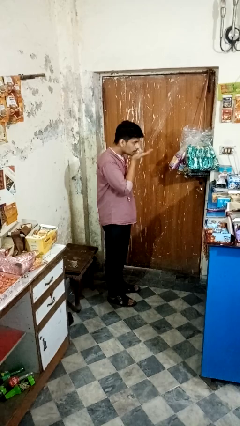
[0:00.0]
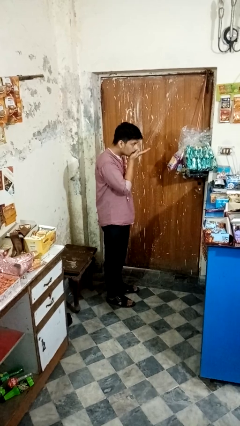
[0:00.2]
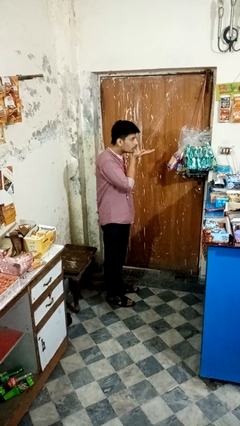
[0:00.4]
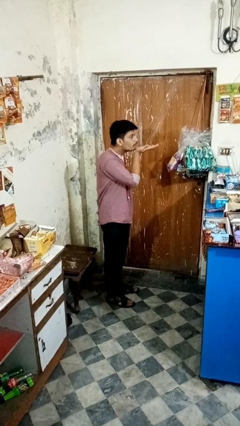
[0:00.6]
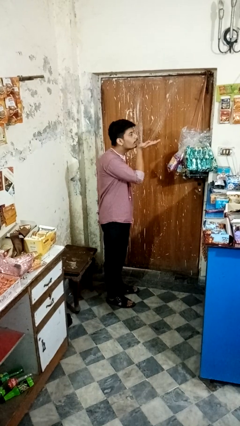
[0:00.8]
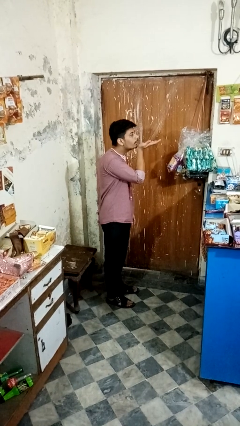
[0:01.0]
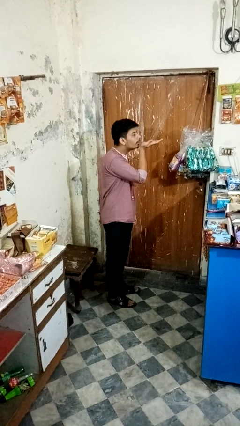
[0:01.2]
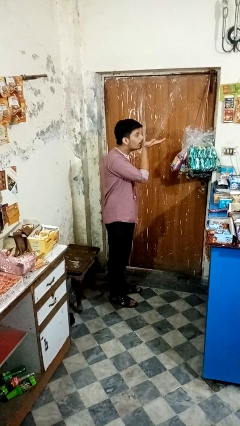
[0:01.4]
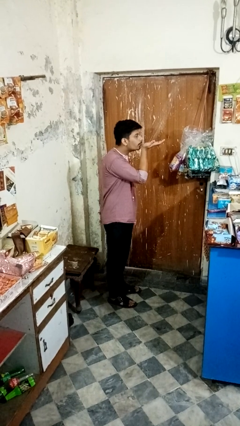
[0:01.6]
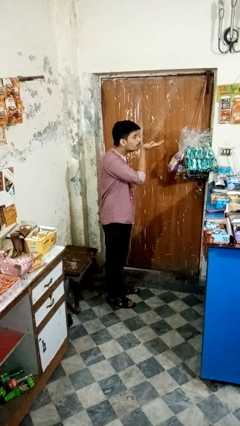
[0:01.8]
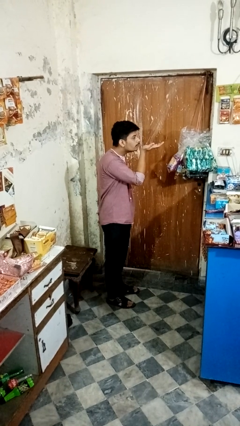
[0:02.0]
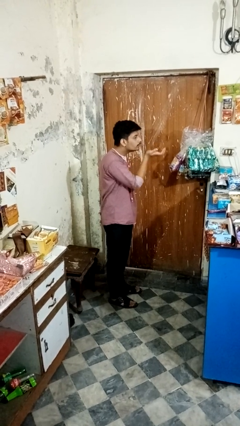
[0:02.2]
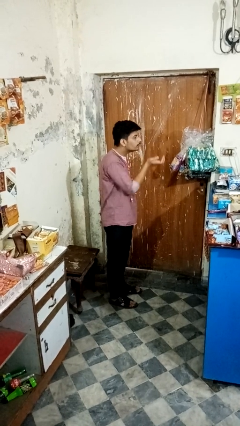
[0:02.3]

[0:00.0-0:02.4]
person gestures blow kiss

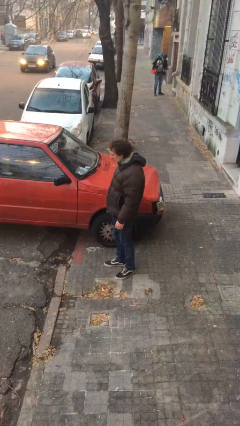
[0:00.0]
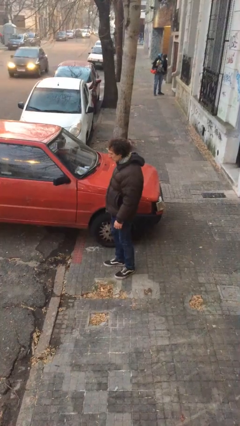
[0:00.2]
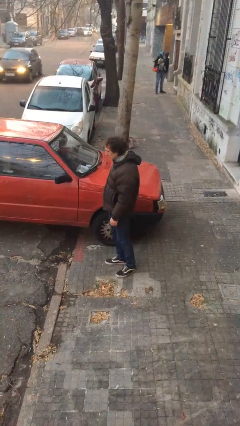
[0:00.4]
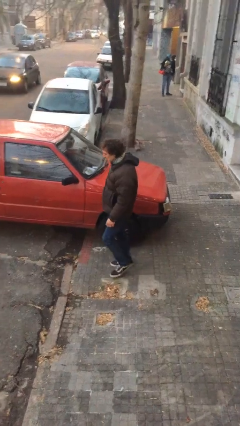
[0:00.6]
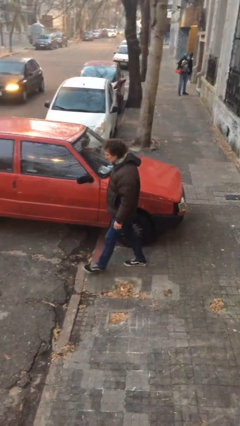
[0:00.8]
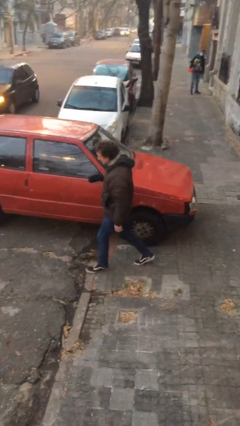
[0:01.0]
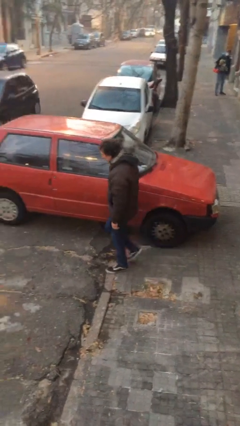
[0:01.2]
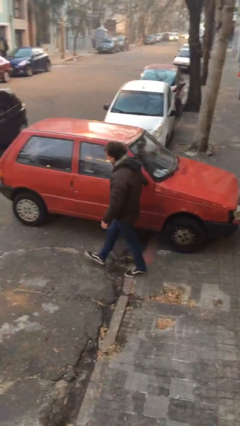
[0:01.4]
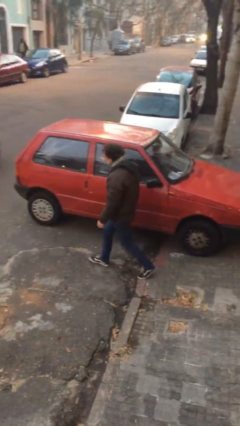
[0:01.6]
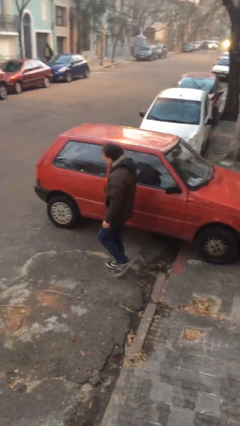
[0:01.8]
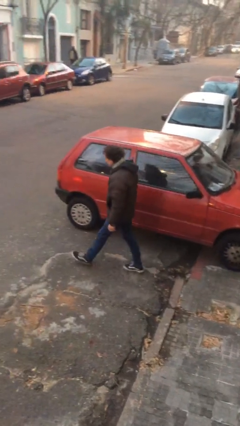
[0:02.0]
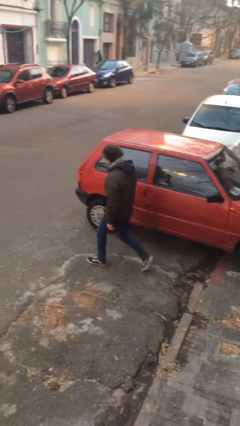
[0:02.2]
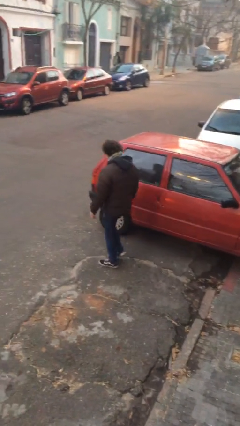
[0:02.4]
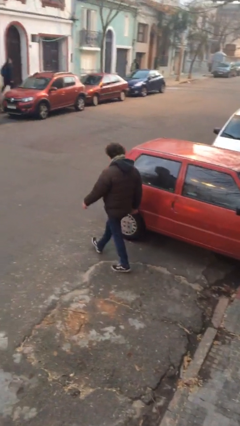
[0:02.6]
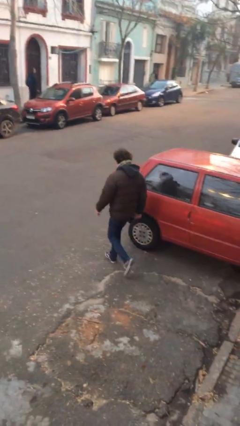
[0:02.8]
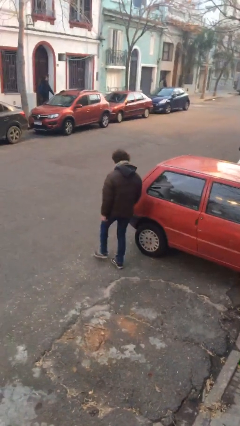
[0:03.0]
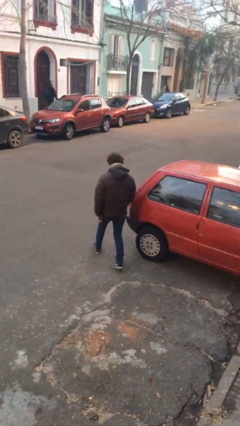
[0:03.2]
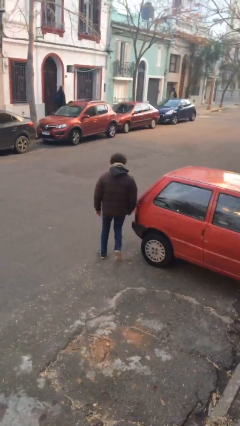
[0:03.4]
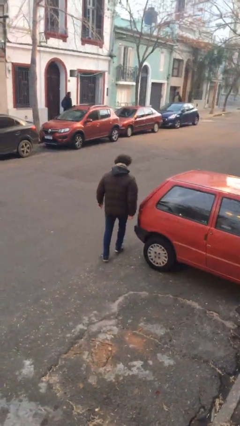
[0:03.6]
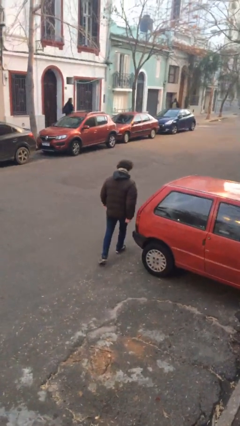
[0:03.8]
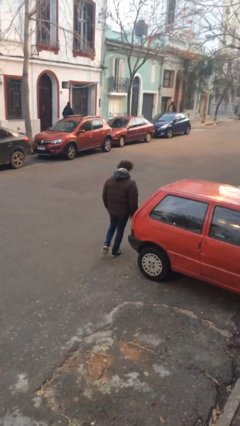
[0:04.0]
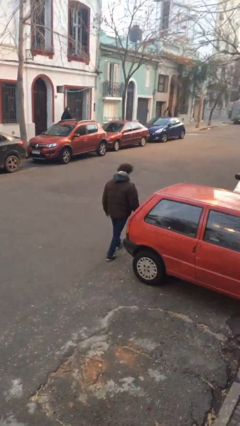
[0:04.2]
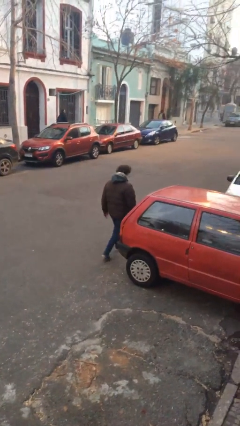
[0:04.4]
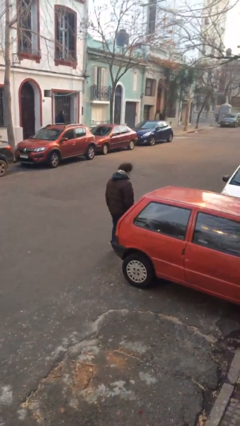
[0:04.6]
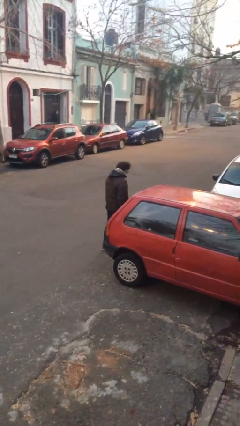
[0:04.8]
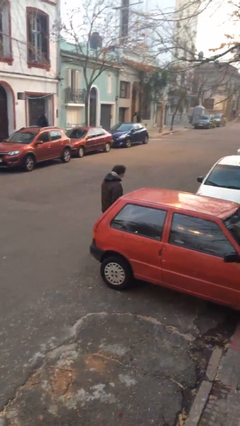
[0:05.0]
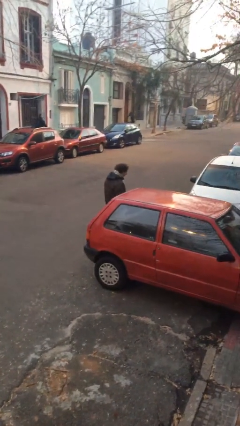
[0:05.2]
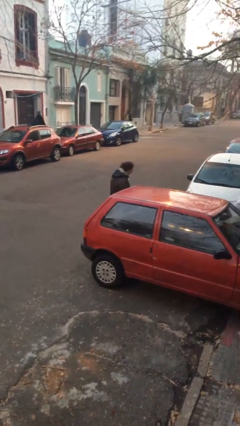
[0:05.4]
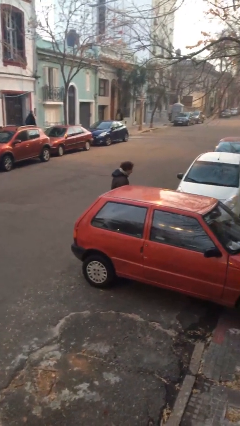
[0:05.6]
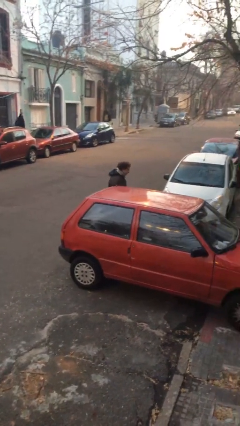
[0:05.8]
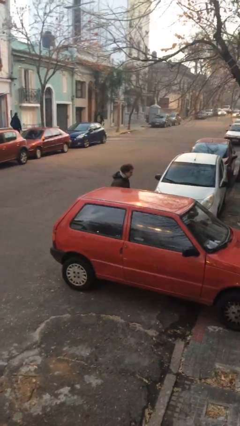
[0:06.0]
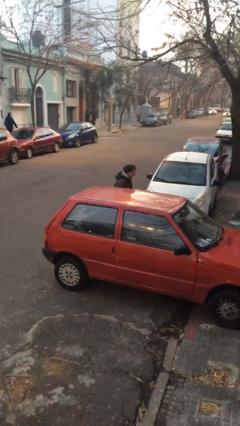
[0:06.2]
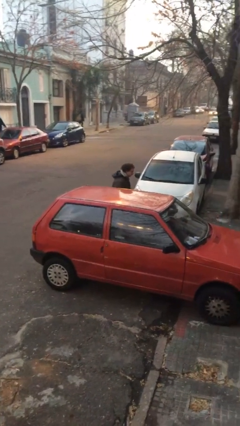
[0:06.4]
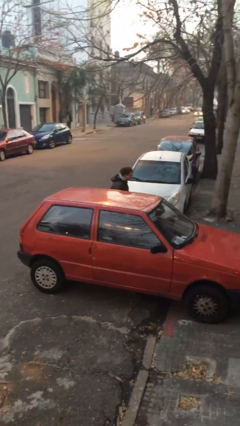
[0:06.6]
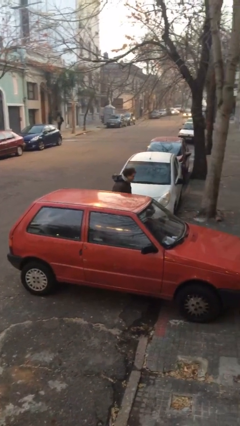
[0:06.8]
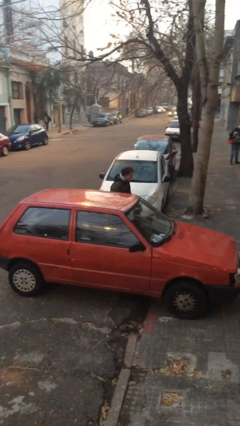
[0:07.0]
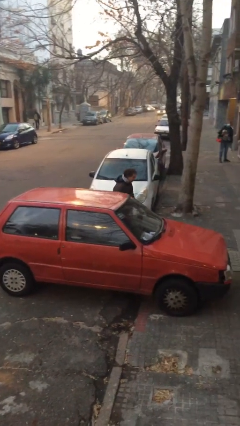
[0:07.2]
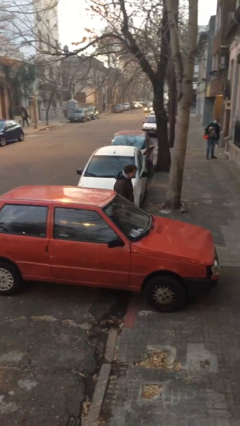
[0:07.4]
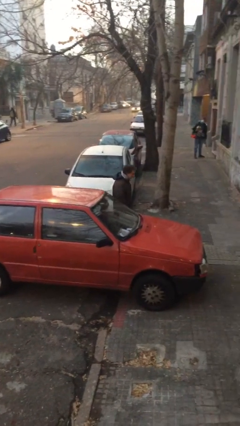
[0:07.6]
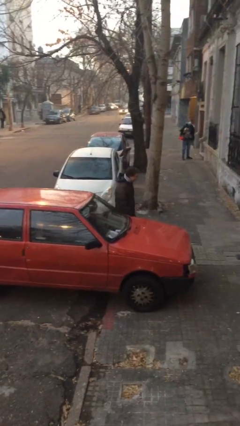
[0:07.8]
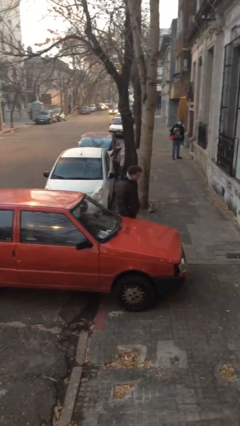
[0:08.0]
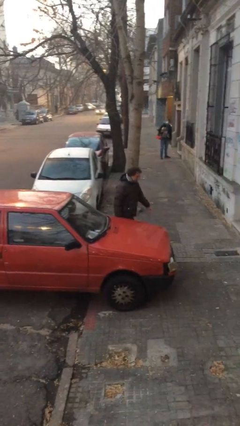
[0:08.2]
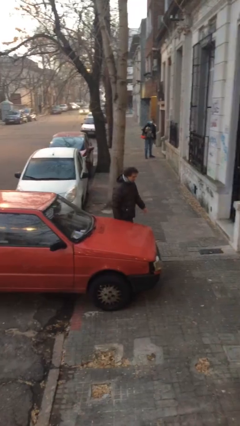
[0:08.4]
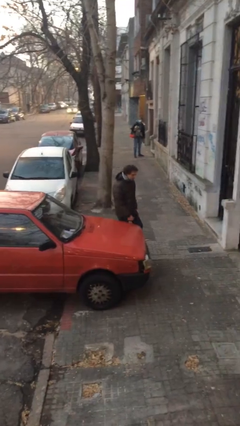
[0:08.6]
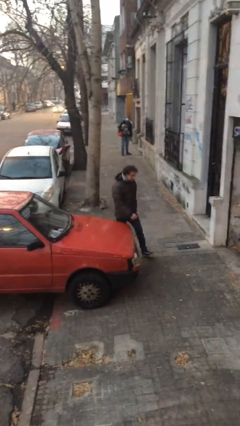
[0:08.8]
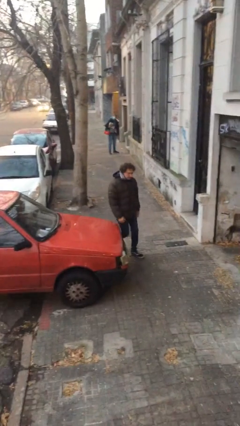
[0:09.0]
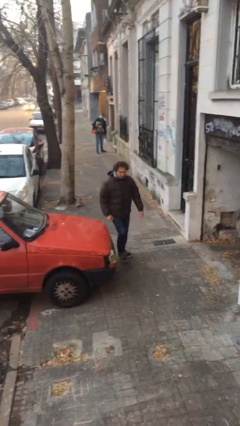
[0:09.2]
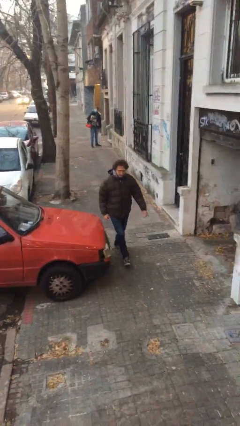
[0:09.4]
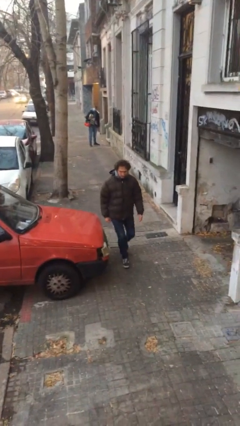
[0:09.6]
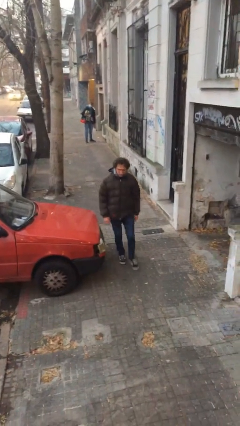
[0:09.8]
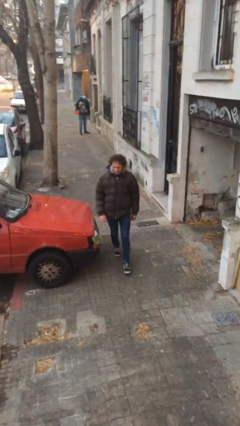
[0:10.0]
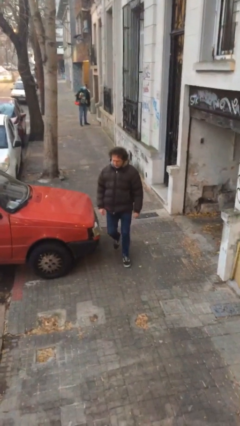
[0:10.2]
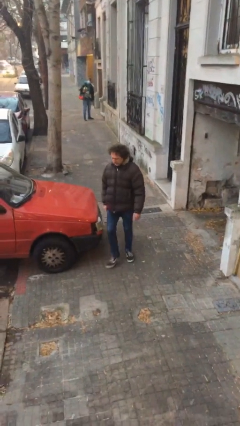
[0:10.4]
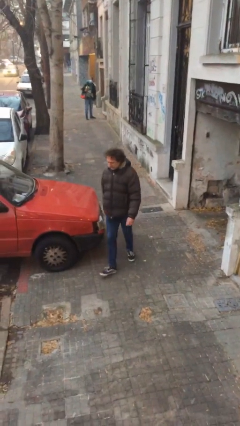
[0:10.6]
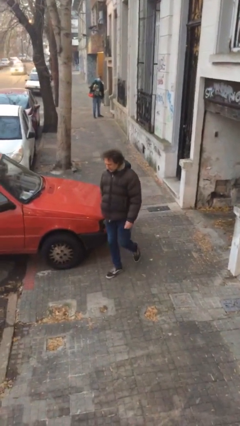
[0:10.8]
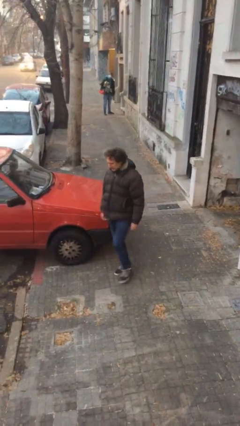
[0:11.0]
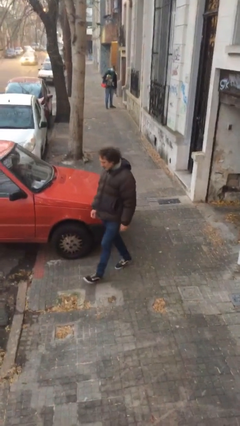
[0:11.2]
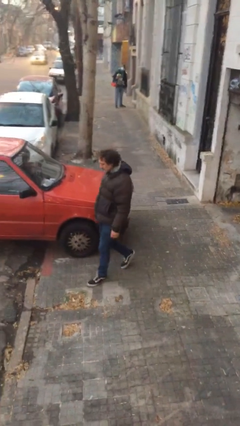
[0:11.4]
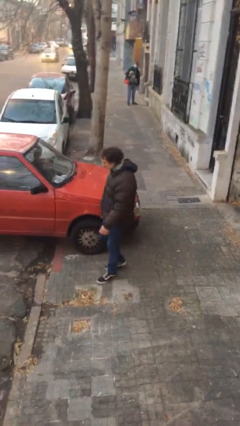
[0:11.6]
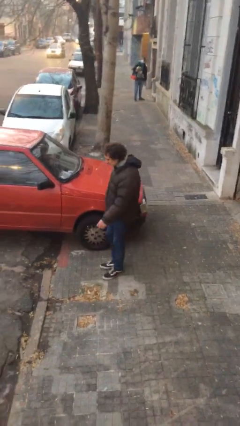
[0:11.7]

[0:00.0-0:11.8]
person walks around car

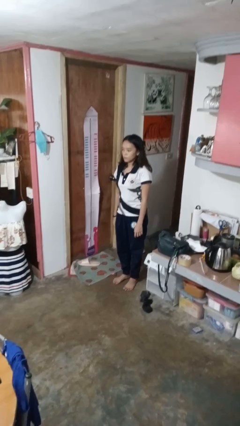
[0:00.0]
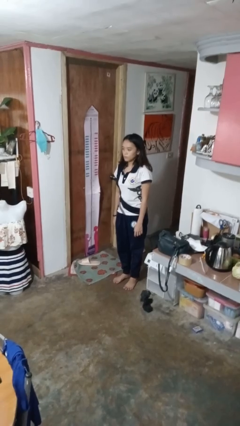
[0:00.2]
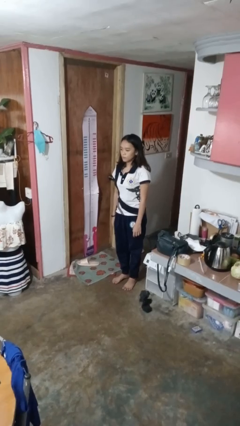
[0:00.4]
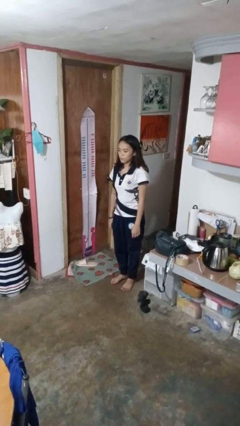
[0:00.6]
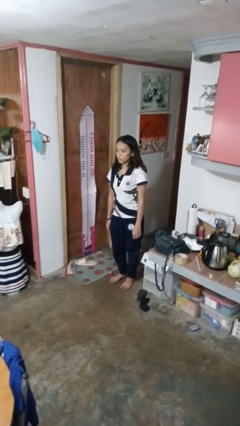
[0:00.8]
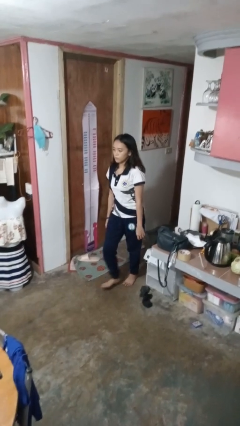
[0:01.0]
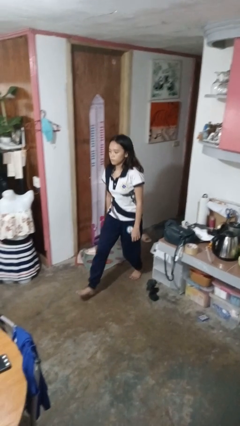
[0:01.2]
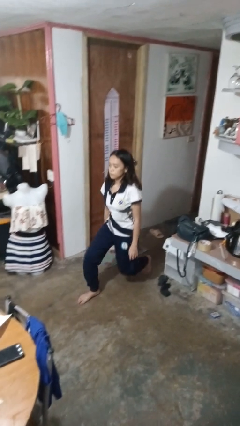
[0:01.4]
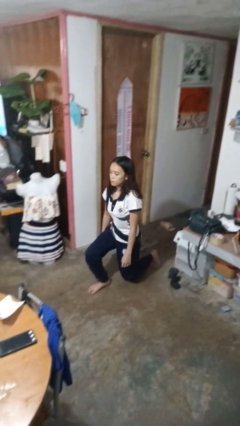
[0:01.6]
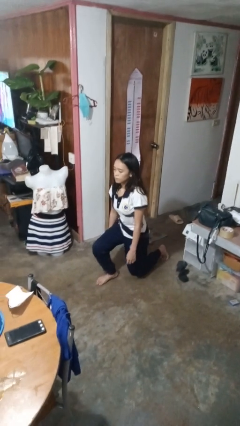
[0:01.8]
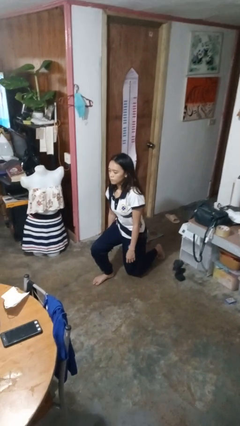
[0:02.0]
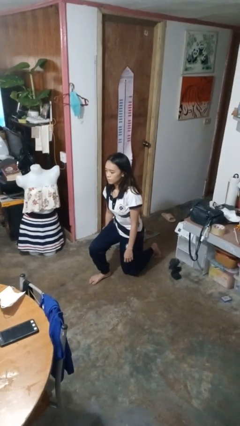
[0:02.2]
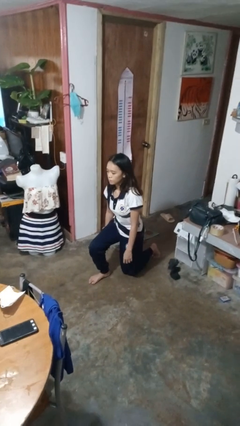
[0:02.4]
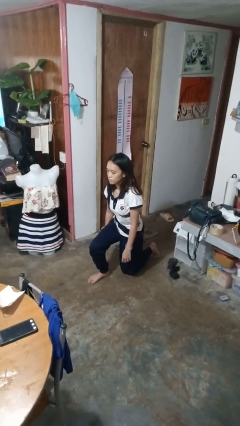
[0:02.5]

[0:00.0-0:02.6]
person kneels

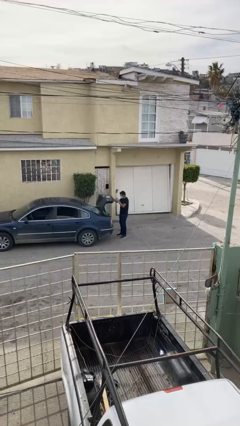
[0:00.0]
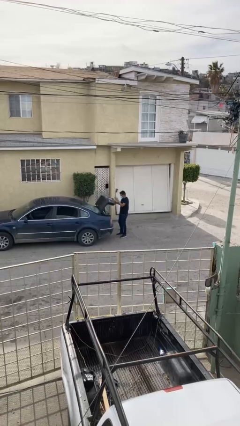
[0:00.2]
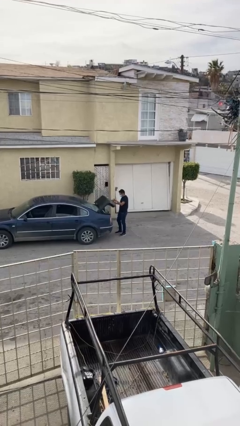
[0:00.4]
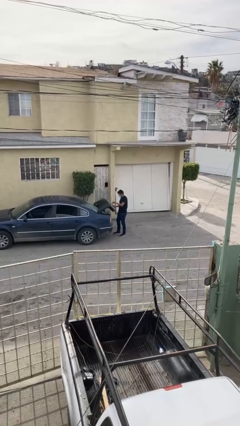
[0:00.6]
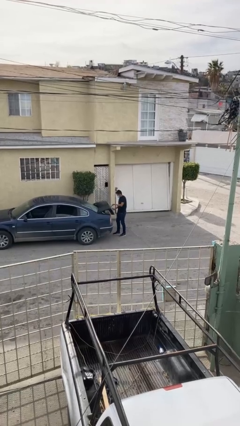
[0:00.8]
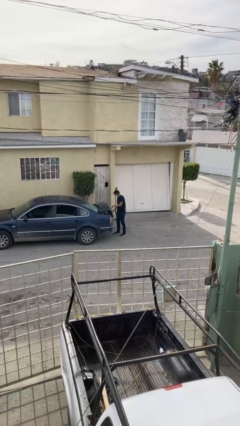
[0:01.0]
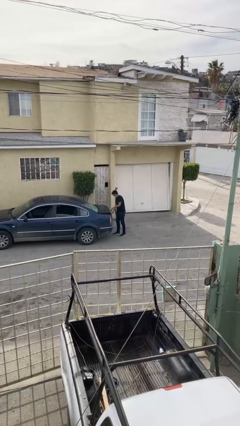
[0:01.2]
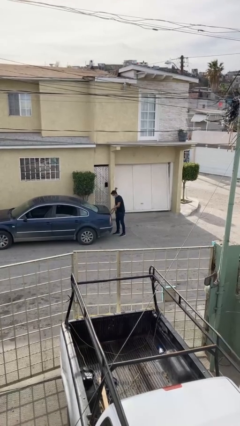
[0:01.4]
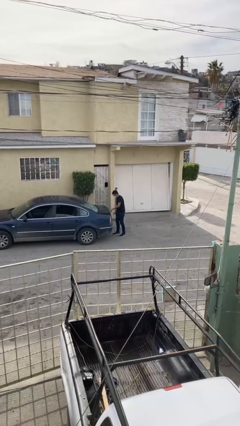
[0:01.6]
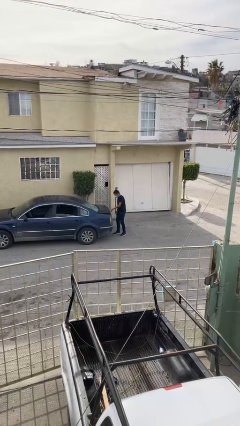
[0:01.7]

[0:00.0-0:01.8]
person closes car trunk
